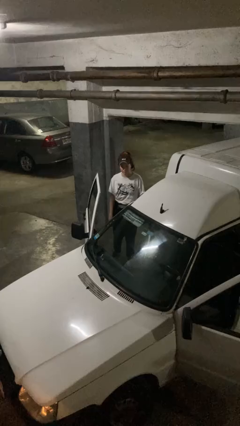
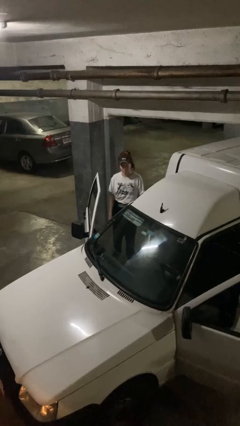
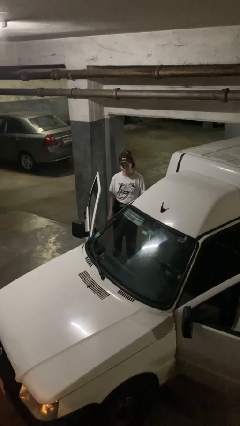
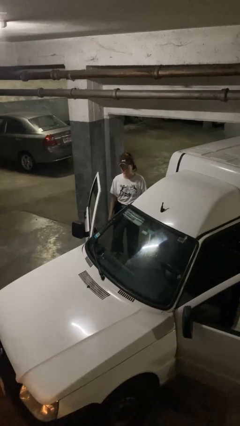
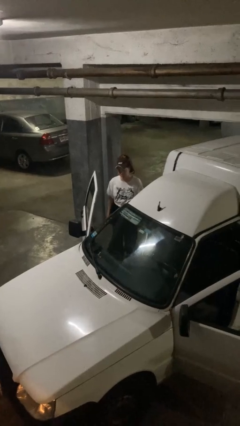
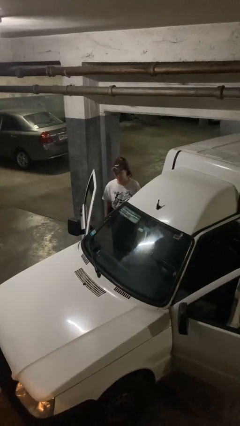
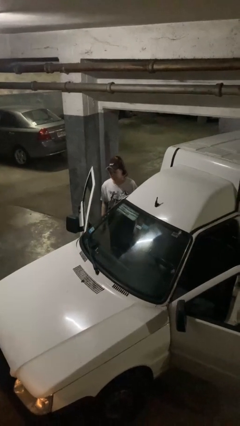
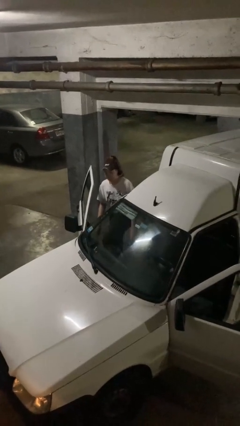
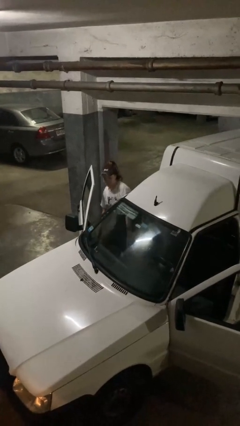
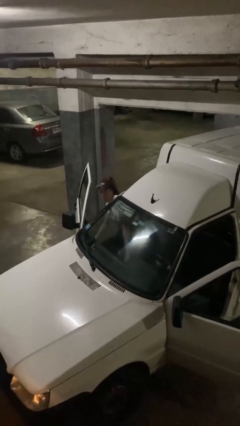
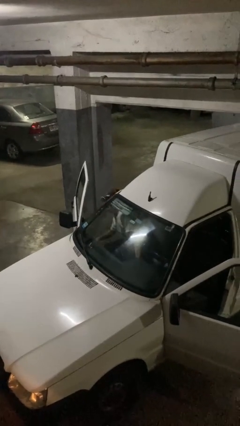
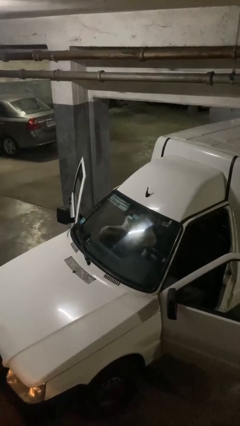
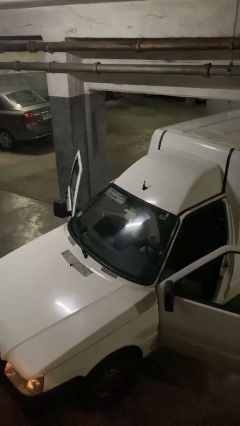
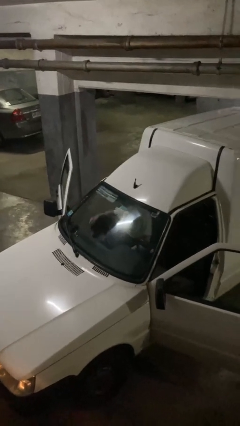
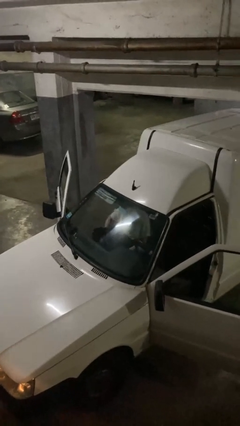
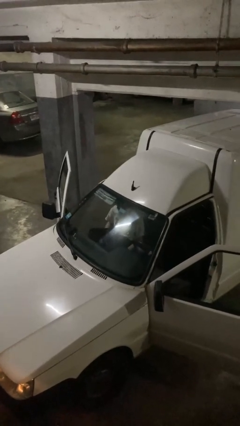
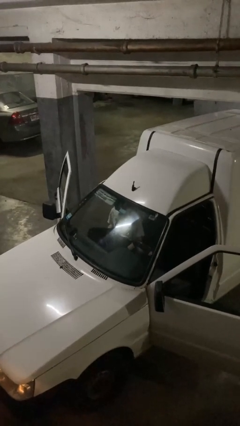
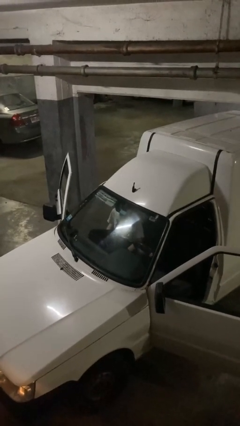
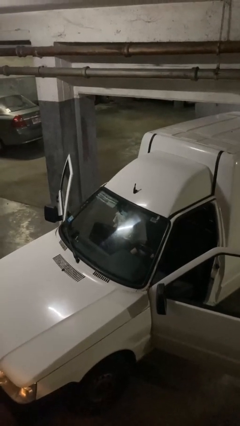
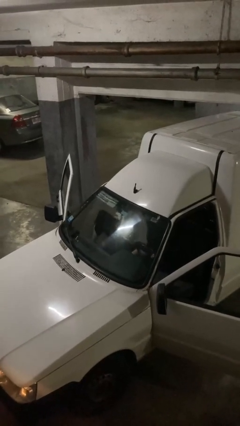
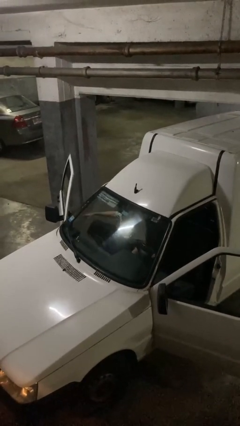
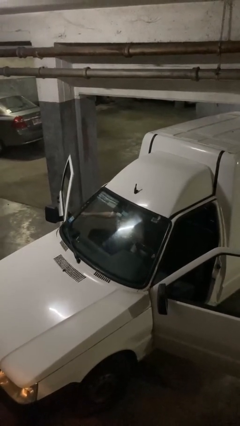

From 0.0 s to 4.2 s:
person enters car

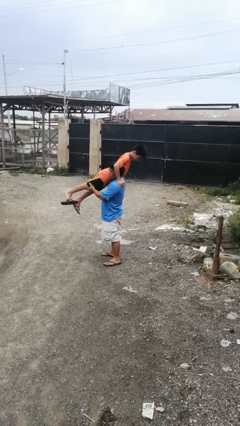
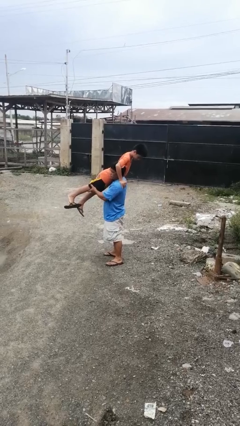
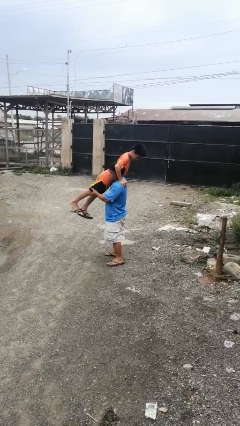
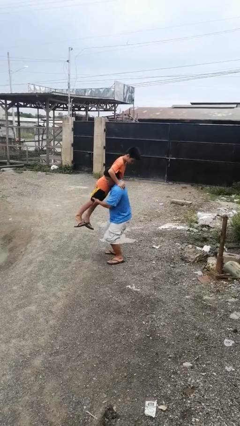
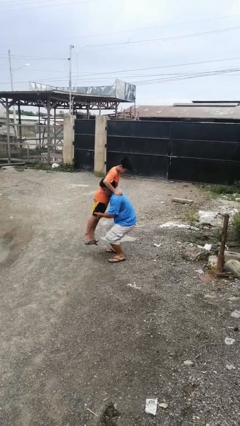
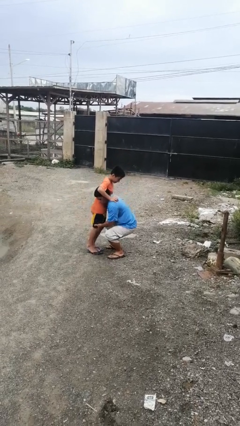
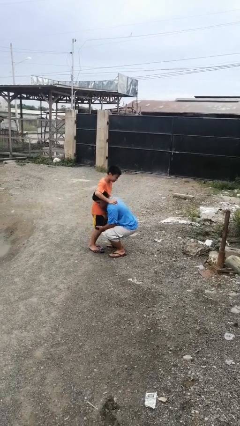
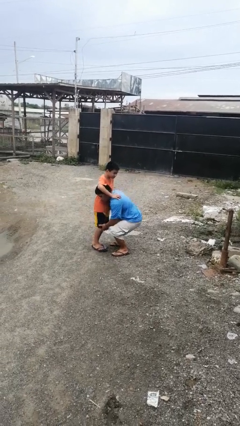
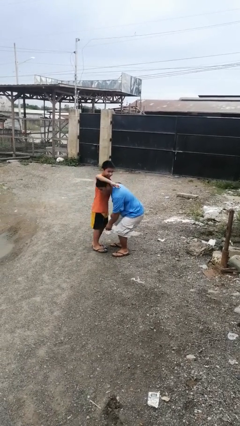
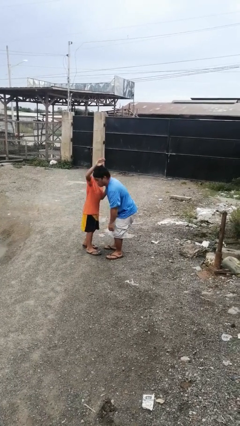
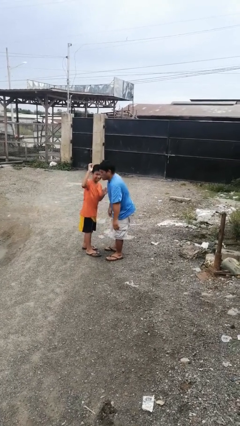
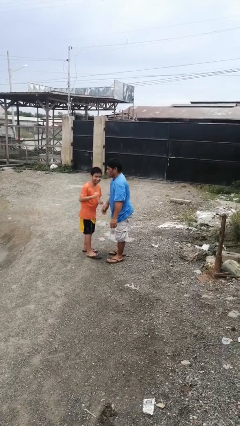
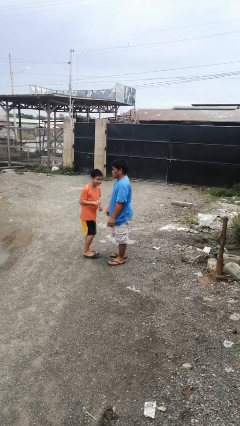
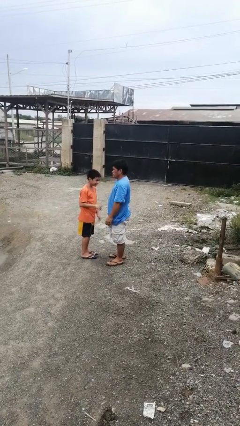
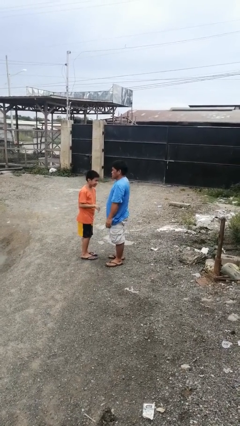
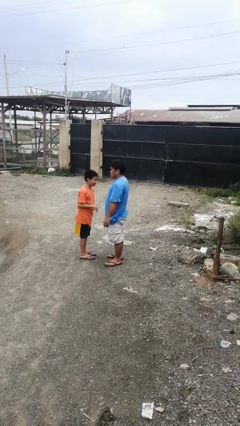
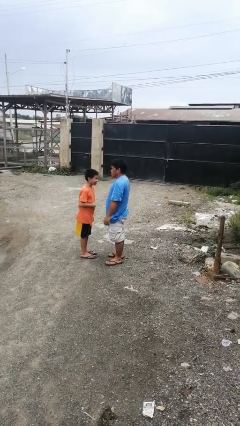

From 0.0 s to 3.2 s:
person puts down person

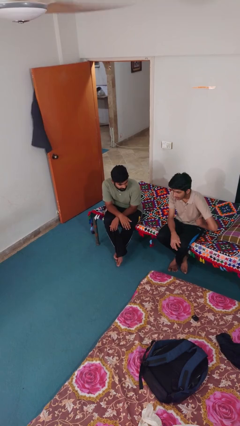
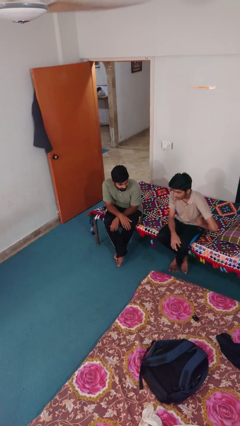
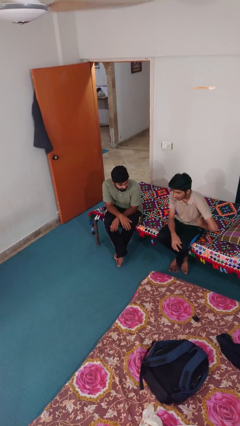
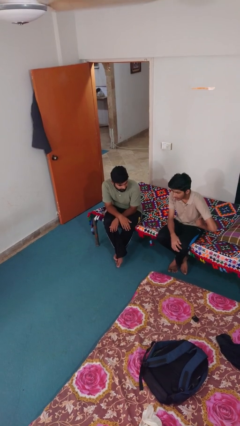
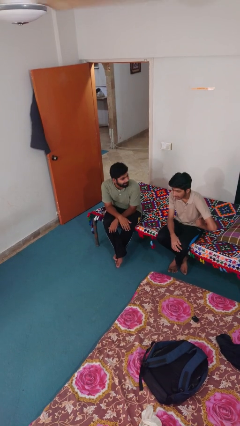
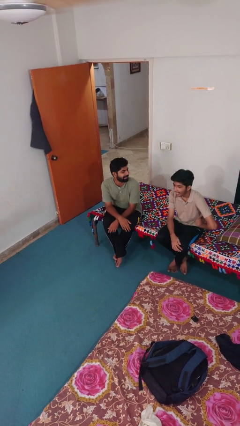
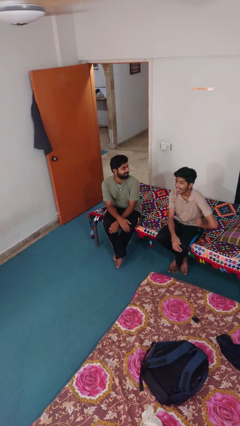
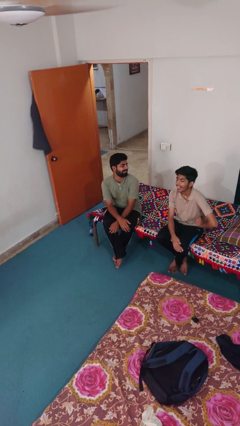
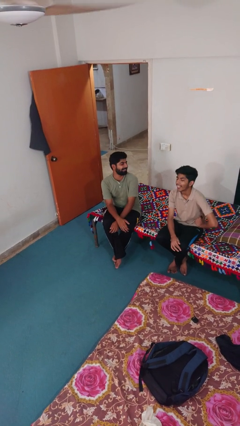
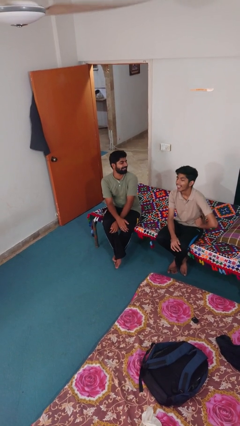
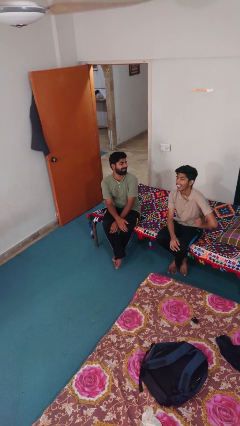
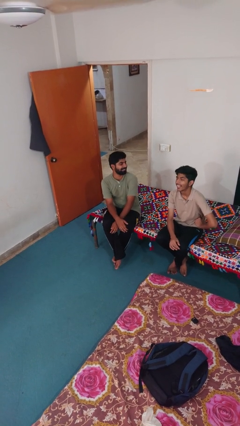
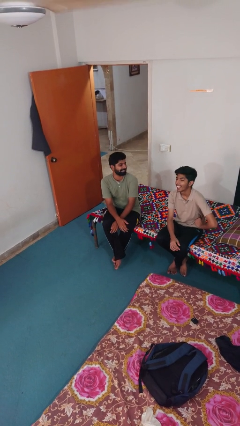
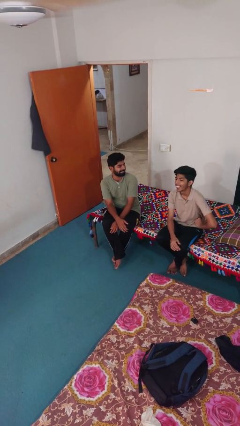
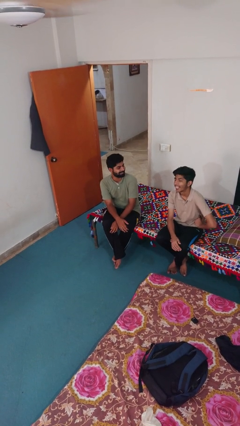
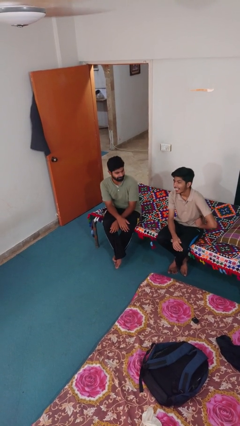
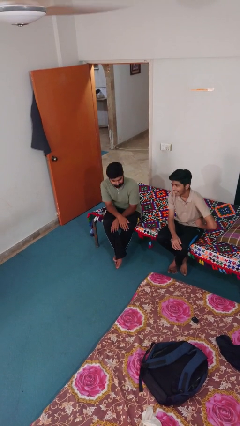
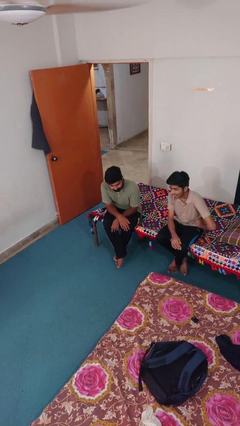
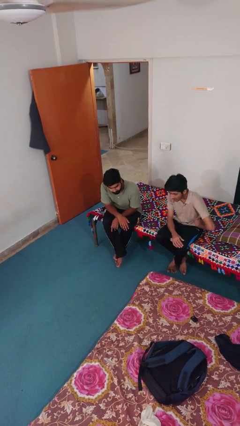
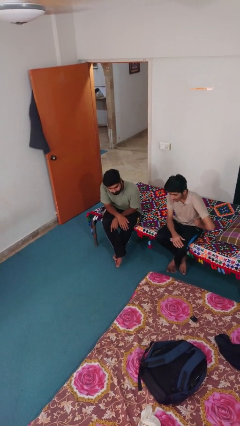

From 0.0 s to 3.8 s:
person laughs with person

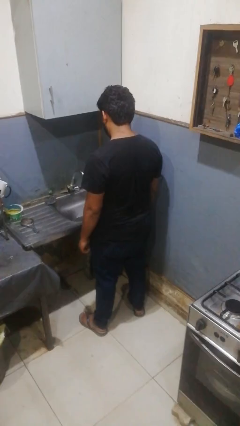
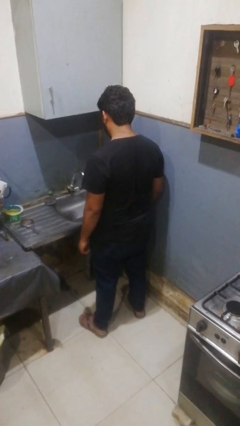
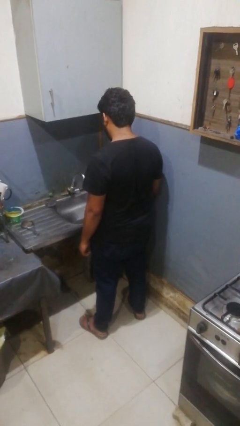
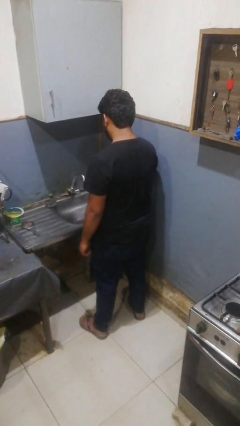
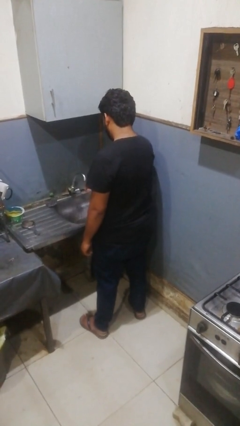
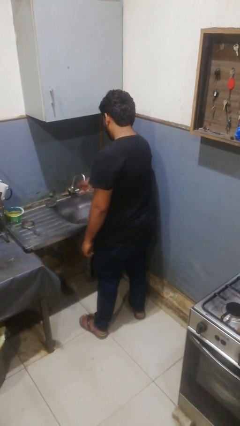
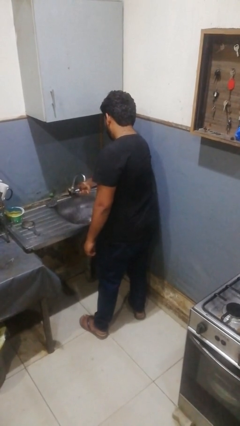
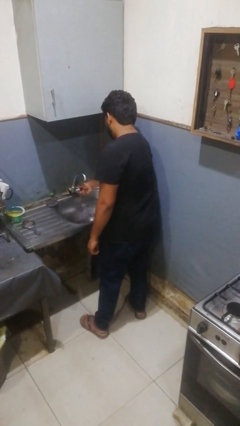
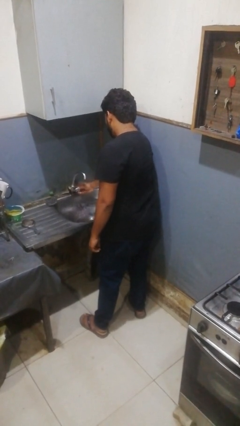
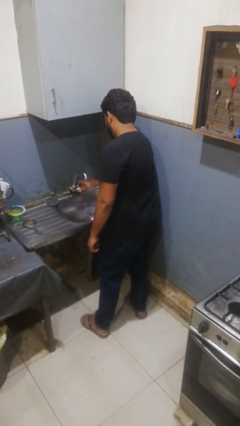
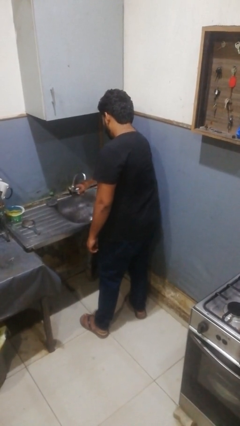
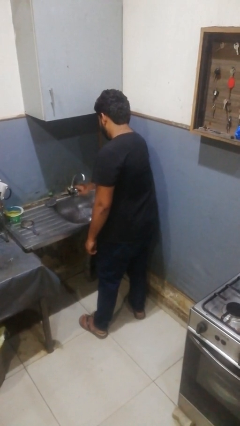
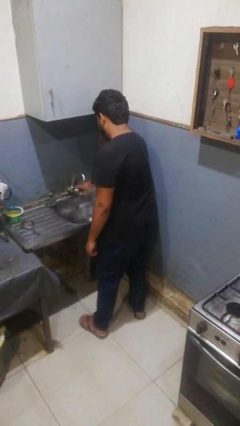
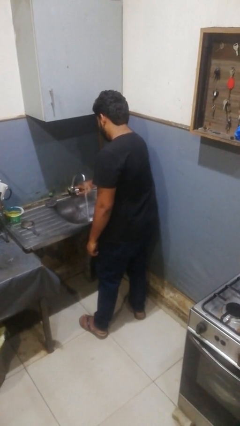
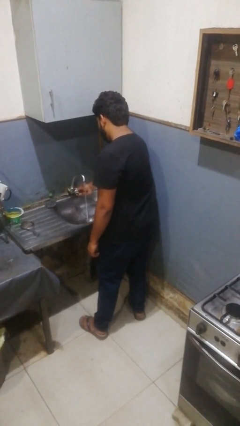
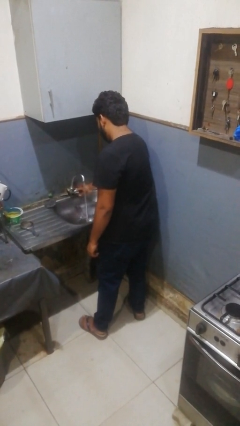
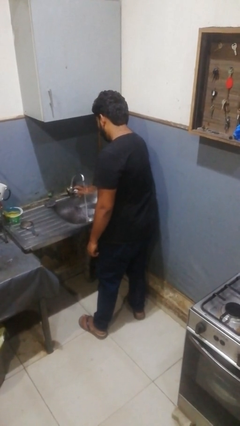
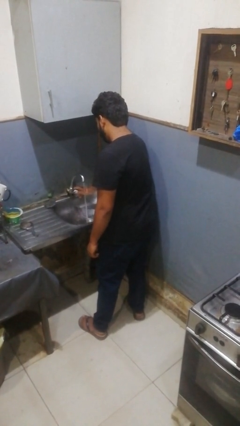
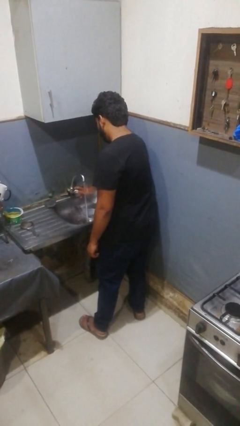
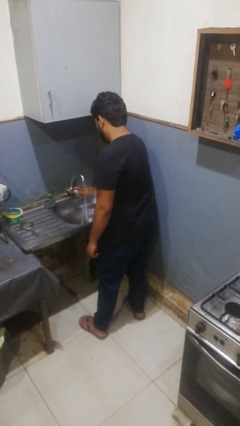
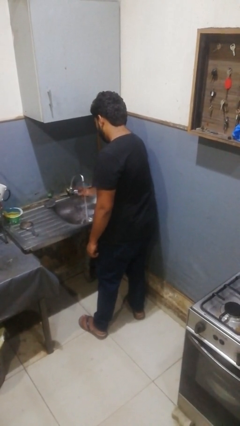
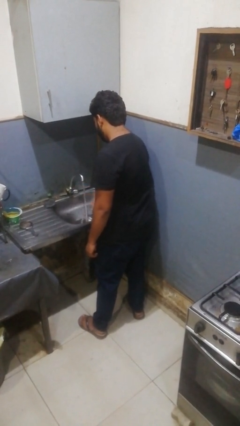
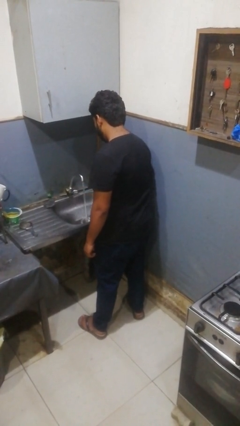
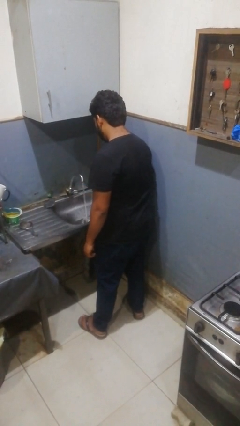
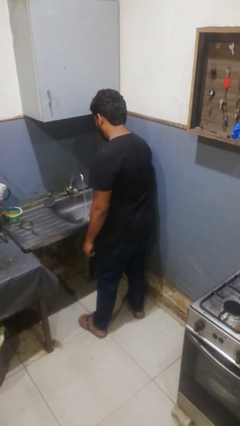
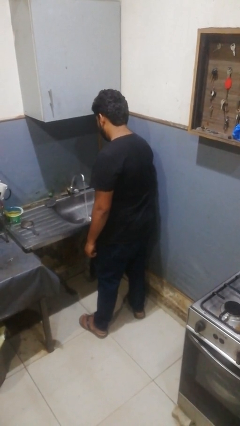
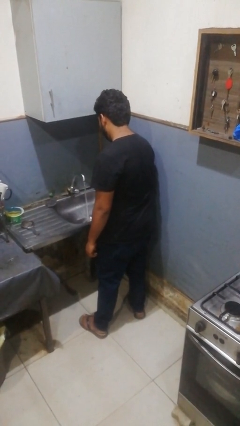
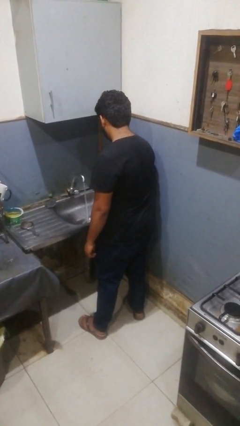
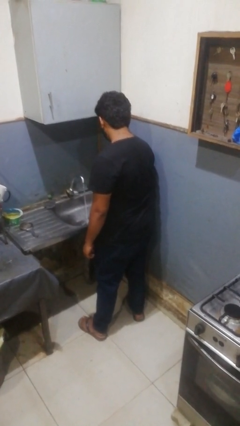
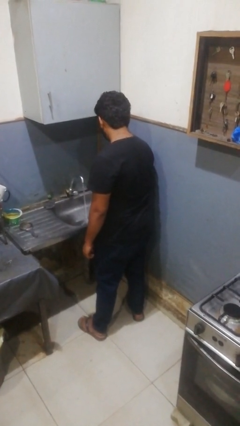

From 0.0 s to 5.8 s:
person turns on faucet

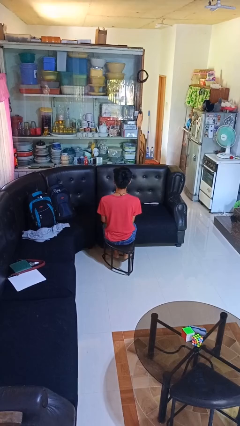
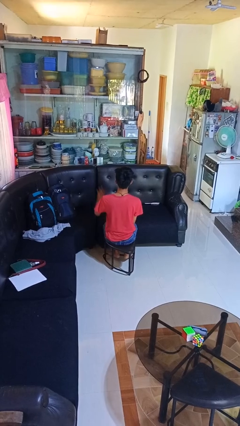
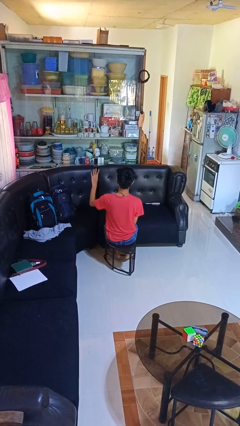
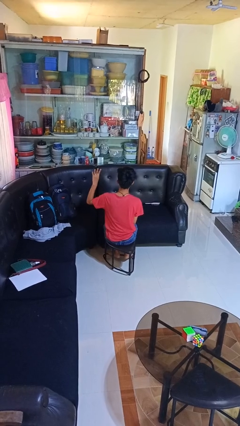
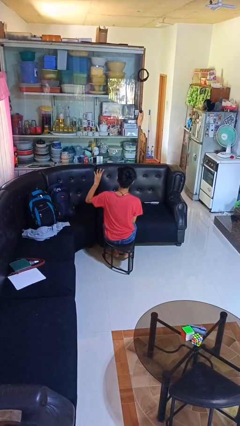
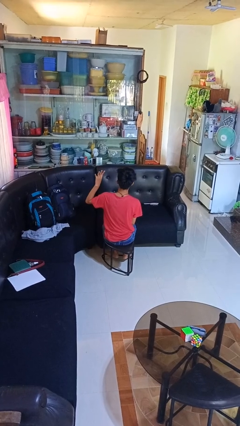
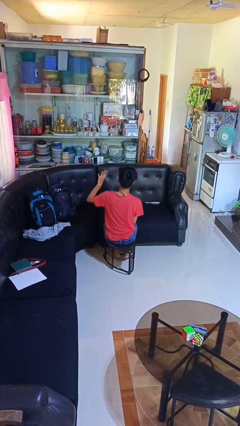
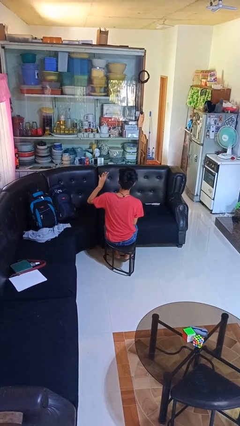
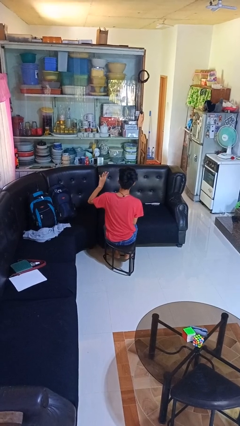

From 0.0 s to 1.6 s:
person gestures number four
